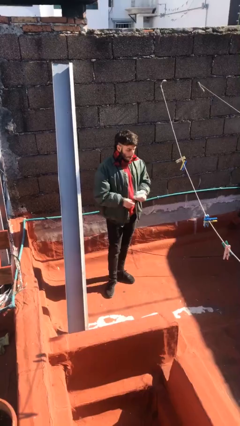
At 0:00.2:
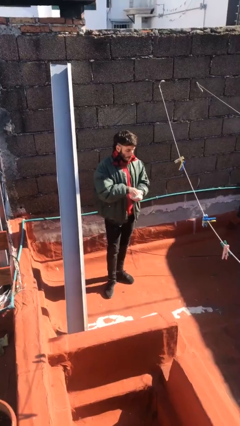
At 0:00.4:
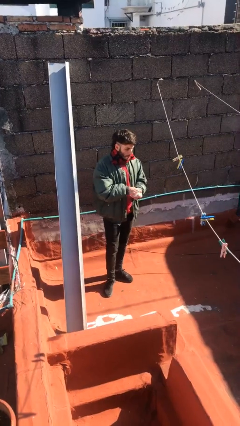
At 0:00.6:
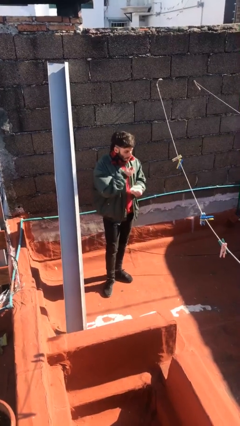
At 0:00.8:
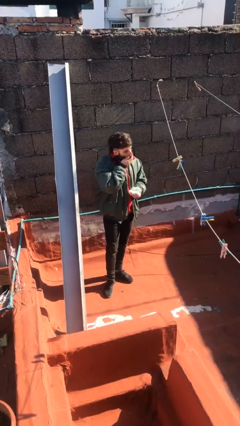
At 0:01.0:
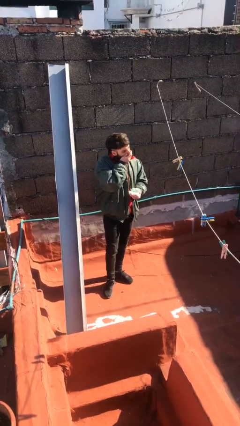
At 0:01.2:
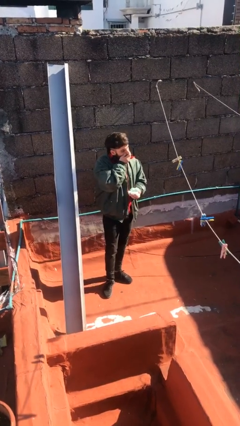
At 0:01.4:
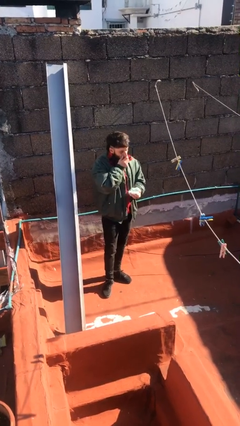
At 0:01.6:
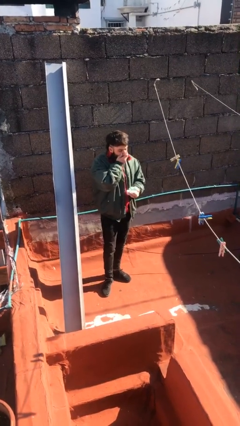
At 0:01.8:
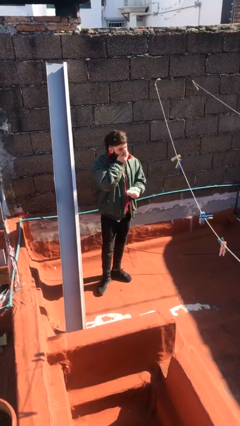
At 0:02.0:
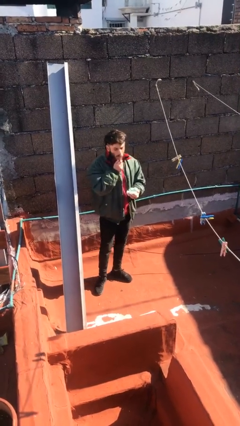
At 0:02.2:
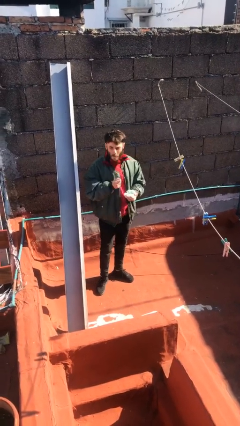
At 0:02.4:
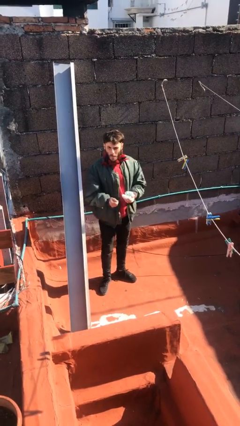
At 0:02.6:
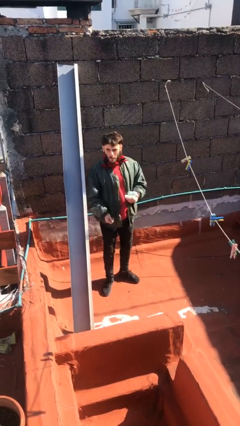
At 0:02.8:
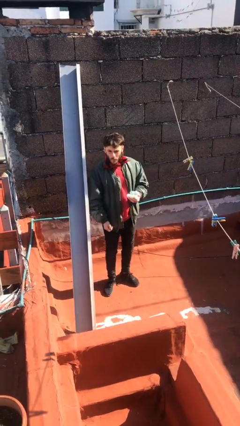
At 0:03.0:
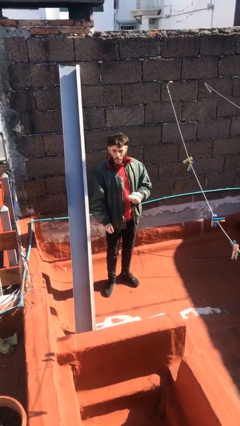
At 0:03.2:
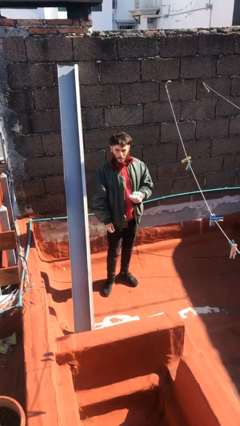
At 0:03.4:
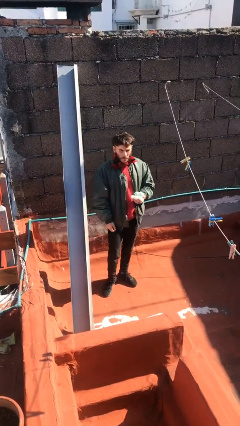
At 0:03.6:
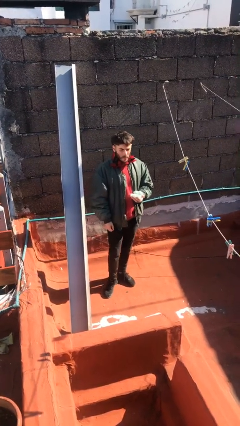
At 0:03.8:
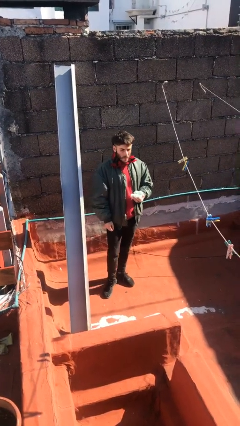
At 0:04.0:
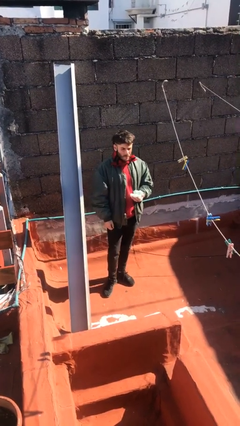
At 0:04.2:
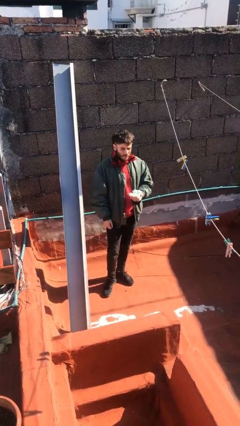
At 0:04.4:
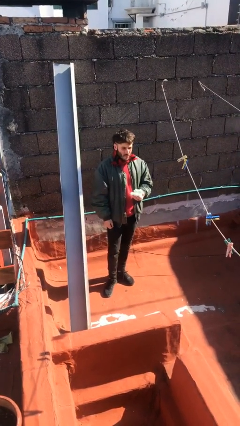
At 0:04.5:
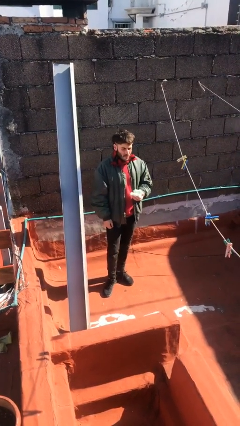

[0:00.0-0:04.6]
person eats snack from bag

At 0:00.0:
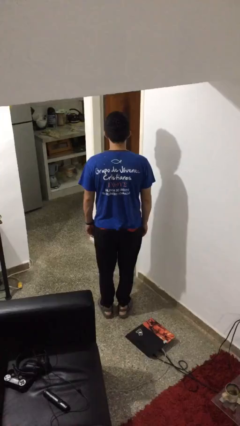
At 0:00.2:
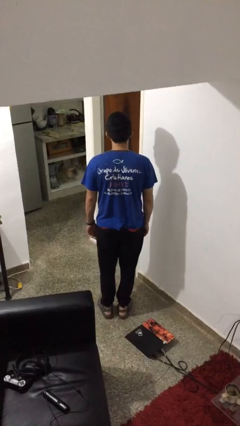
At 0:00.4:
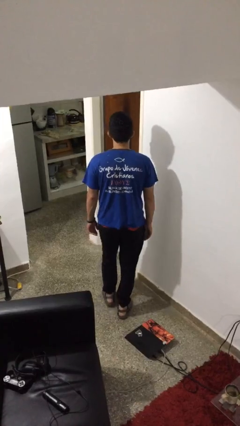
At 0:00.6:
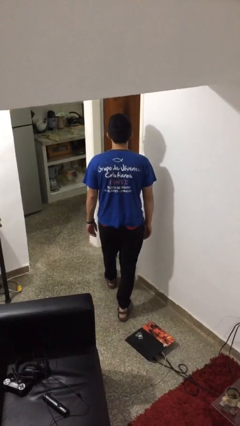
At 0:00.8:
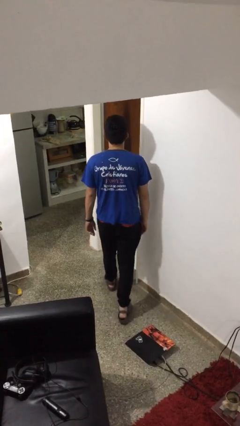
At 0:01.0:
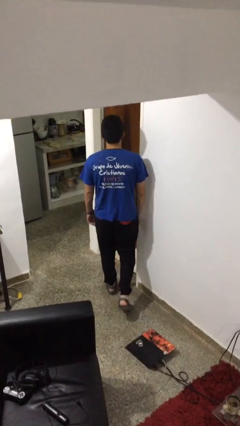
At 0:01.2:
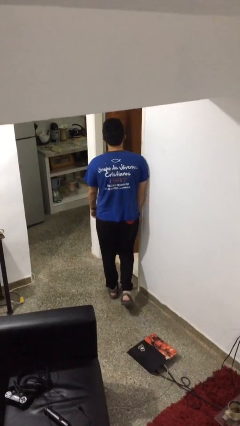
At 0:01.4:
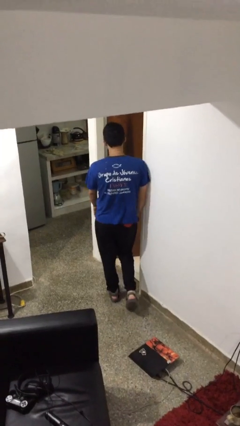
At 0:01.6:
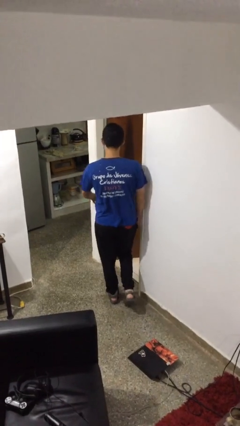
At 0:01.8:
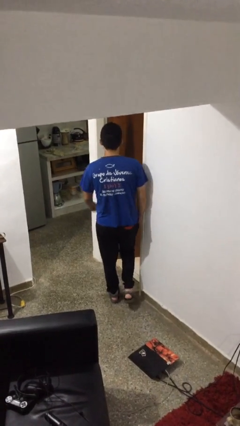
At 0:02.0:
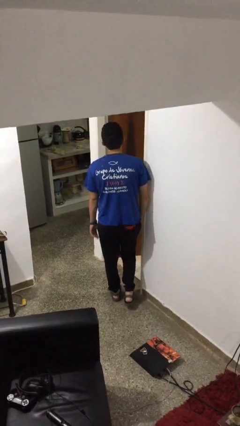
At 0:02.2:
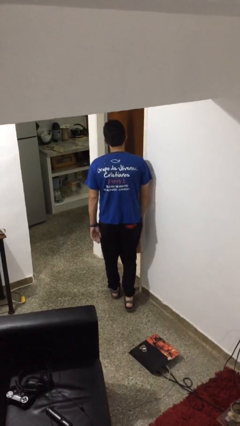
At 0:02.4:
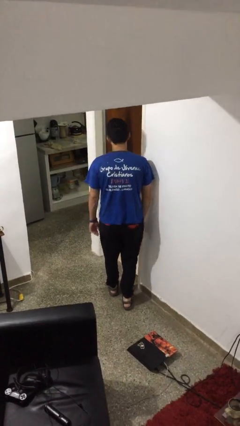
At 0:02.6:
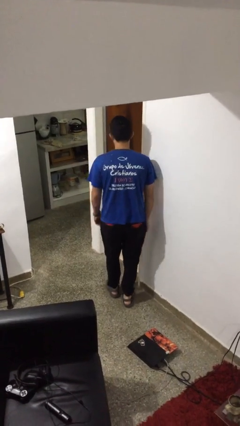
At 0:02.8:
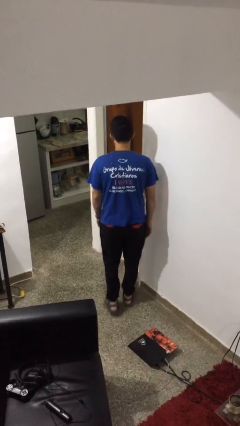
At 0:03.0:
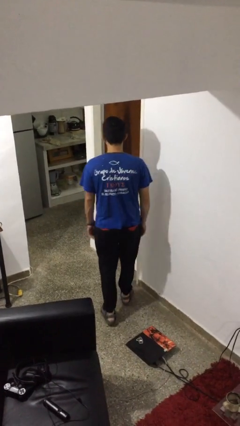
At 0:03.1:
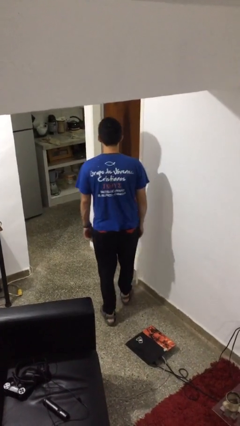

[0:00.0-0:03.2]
person bumps into wall

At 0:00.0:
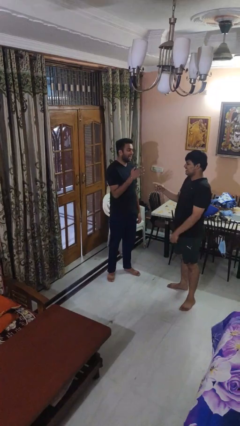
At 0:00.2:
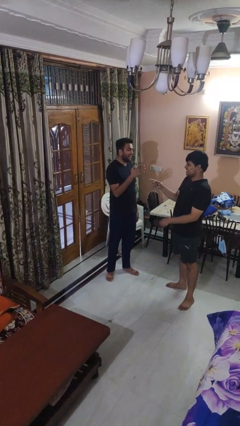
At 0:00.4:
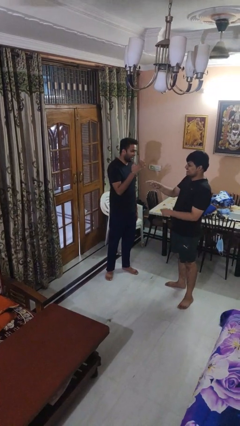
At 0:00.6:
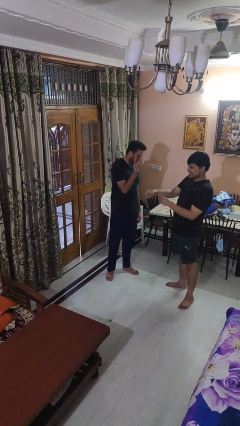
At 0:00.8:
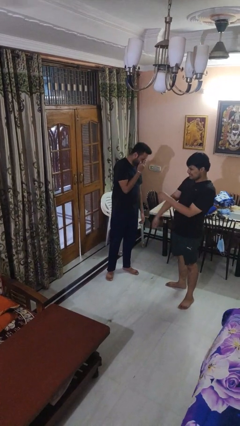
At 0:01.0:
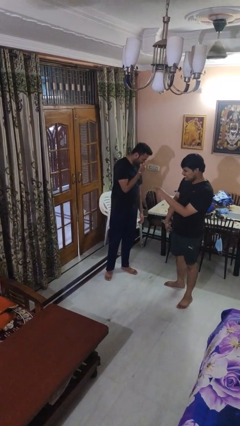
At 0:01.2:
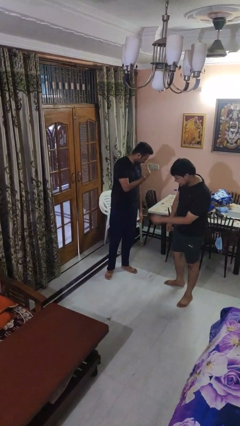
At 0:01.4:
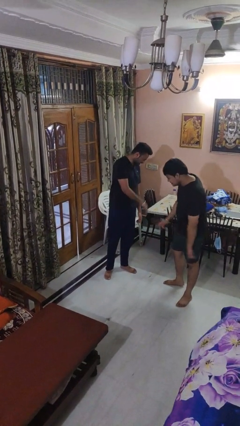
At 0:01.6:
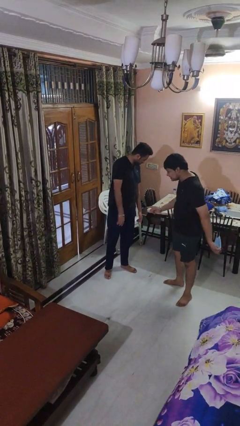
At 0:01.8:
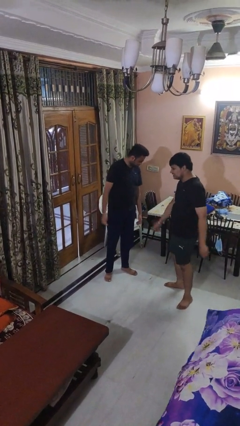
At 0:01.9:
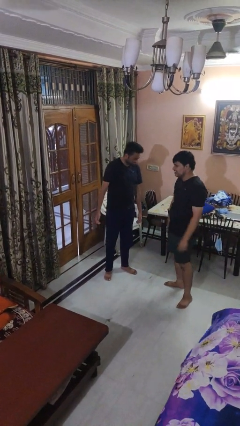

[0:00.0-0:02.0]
person laughs with person

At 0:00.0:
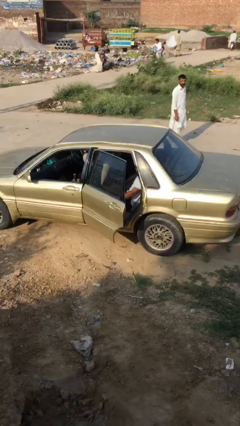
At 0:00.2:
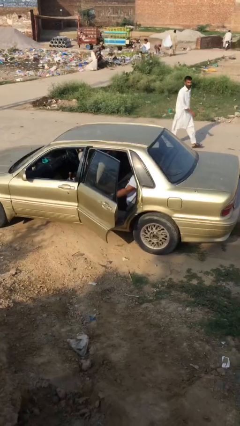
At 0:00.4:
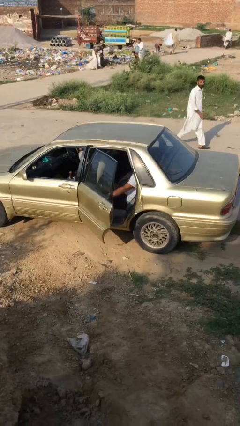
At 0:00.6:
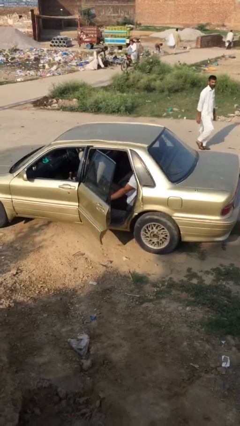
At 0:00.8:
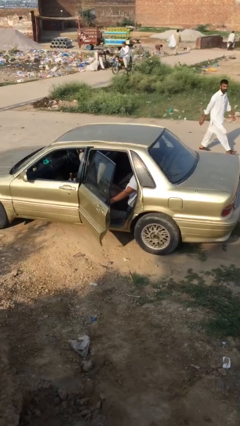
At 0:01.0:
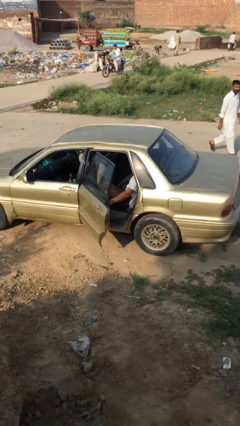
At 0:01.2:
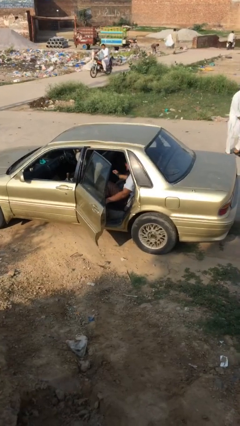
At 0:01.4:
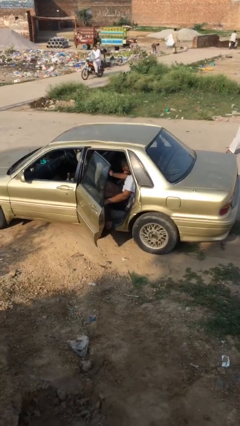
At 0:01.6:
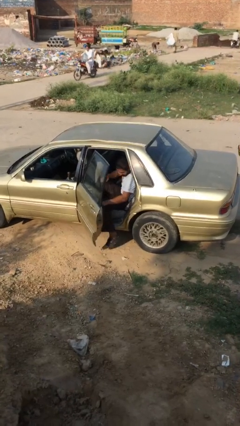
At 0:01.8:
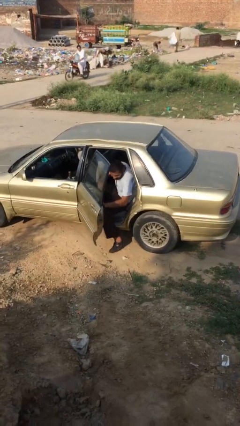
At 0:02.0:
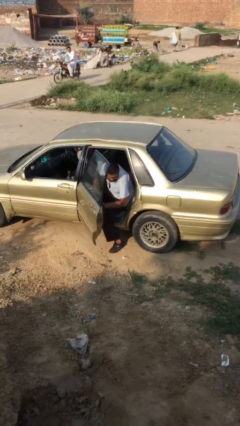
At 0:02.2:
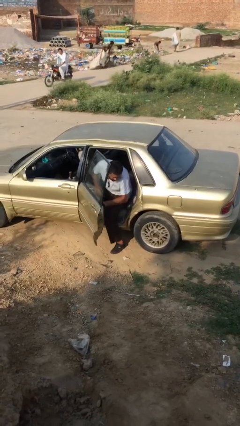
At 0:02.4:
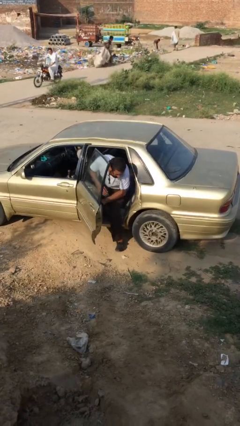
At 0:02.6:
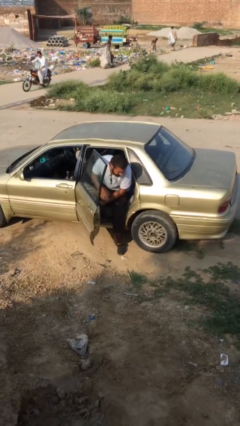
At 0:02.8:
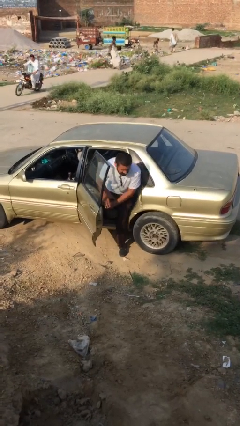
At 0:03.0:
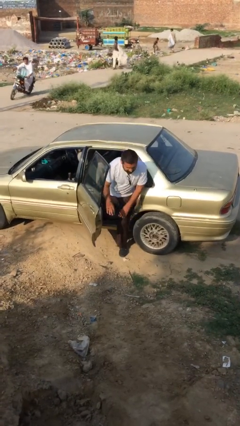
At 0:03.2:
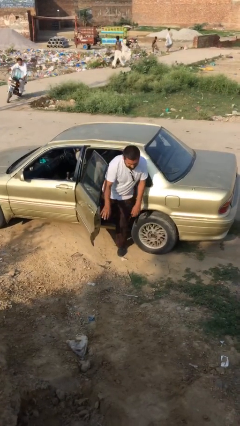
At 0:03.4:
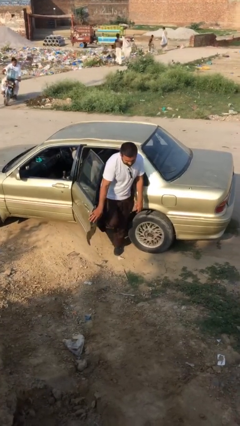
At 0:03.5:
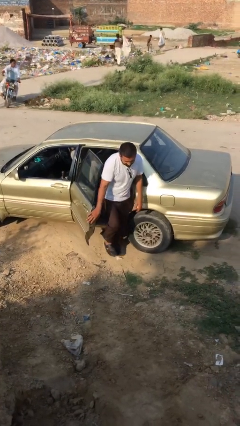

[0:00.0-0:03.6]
person exits car

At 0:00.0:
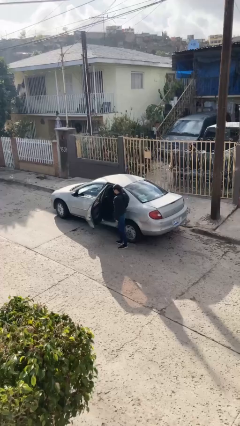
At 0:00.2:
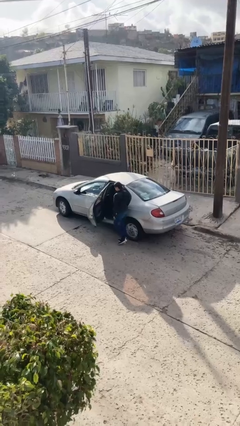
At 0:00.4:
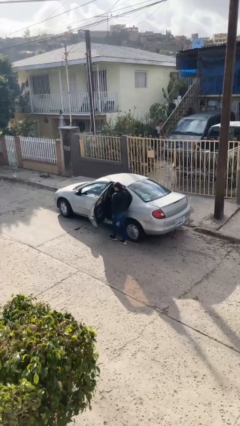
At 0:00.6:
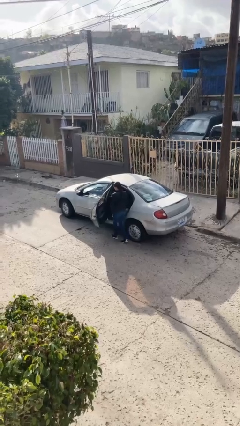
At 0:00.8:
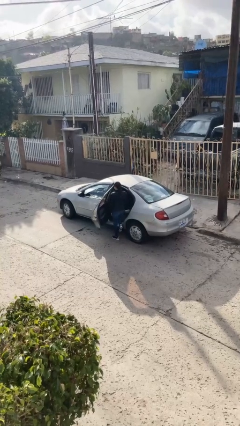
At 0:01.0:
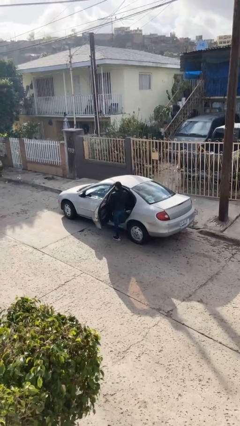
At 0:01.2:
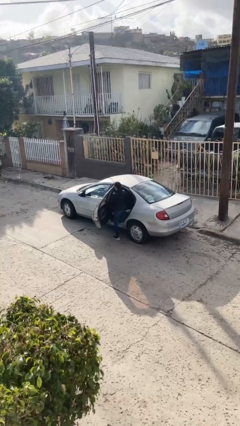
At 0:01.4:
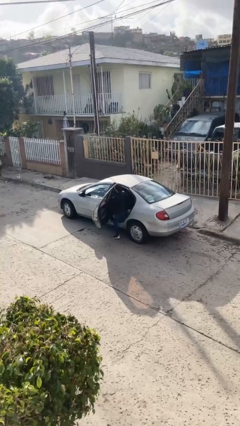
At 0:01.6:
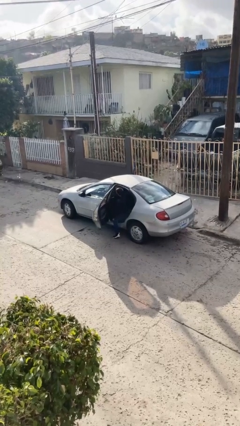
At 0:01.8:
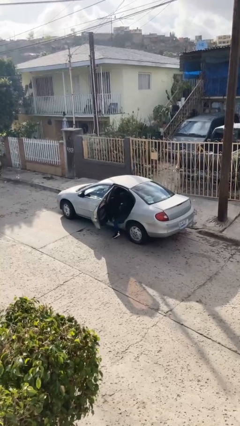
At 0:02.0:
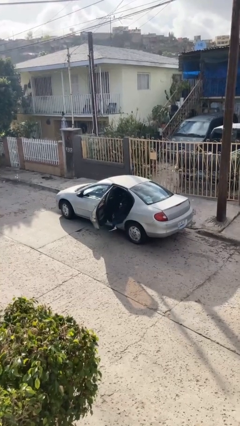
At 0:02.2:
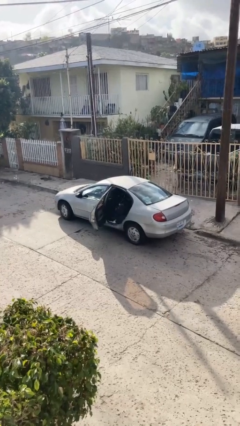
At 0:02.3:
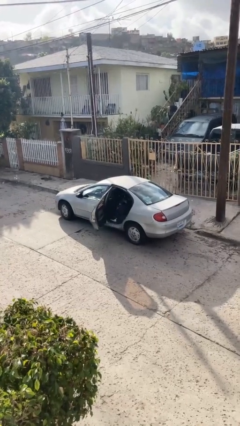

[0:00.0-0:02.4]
person enters car

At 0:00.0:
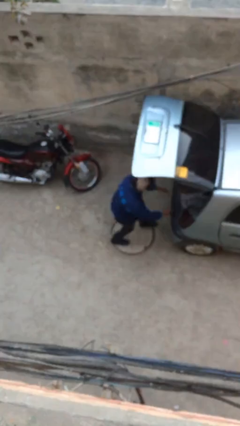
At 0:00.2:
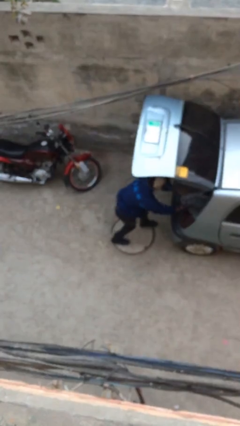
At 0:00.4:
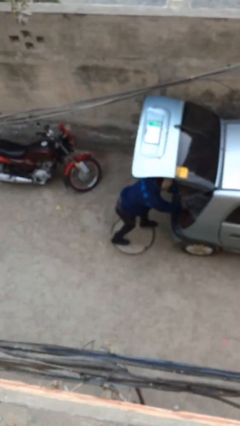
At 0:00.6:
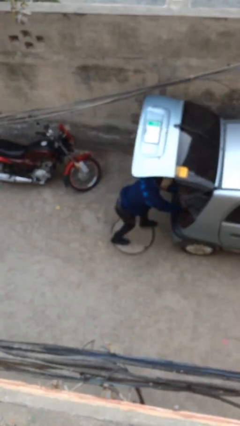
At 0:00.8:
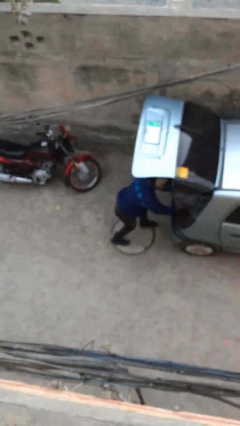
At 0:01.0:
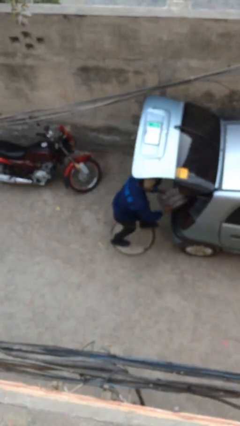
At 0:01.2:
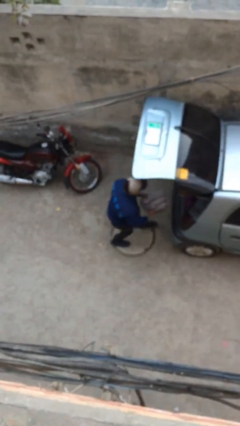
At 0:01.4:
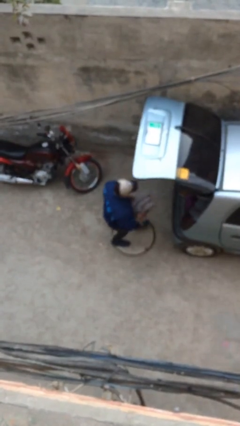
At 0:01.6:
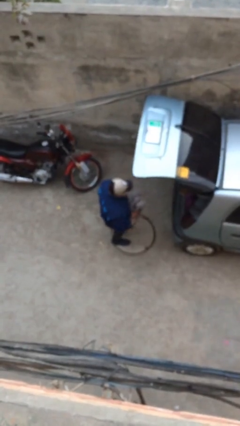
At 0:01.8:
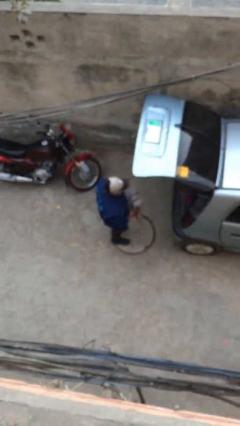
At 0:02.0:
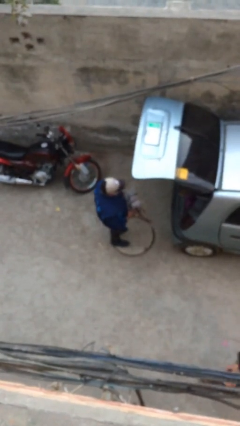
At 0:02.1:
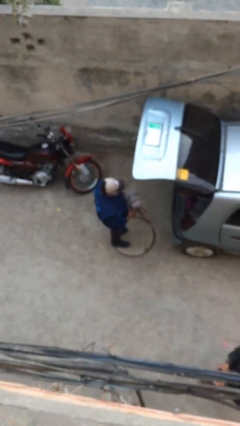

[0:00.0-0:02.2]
person unloads car
